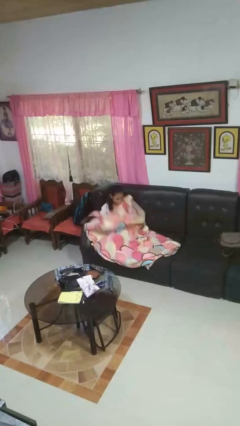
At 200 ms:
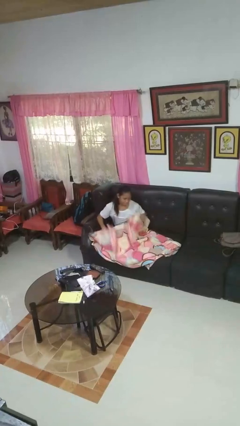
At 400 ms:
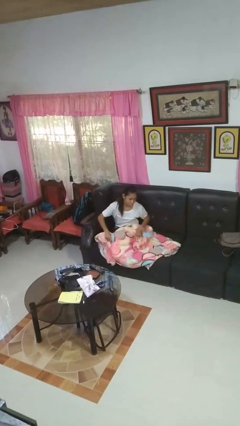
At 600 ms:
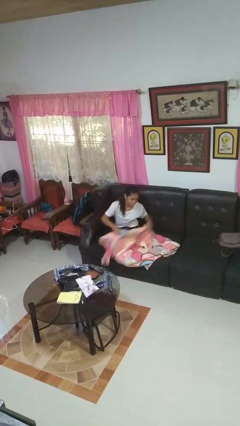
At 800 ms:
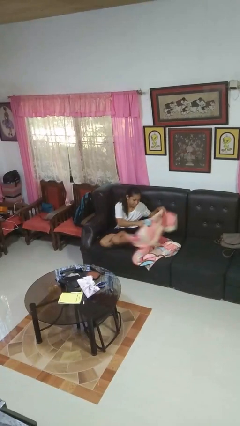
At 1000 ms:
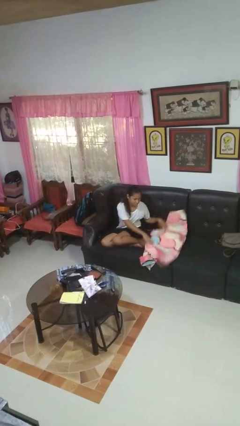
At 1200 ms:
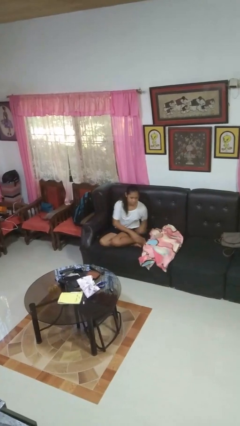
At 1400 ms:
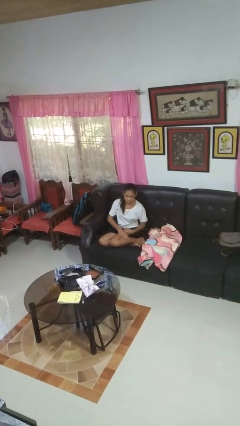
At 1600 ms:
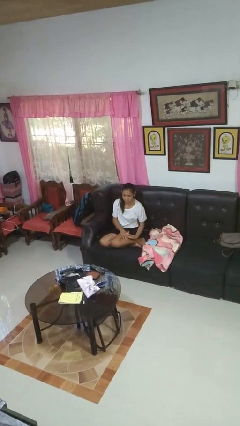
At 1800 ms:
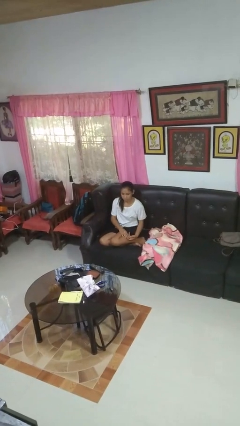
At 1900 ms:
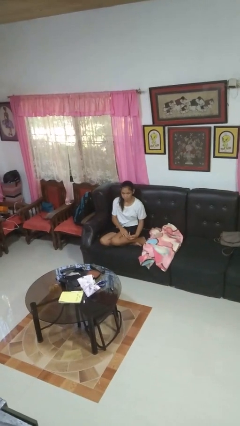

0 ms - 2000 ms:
person uncovers with blanket

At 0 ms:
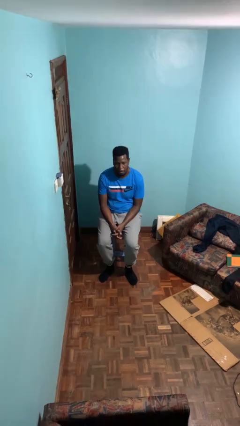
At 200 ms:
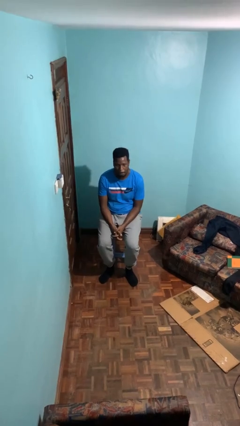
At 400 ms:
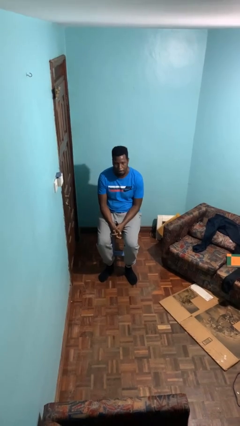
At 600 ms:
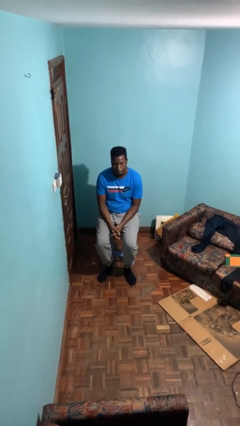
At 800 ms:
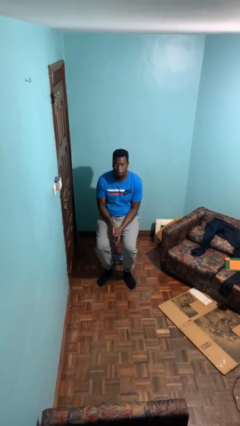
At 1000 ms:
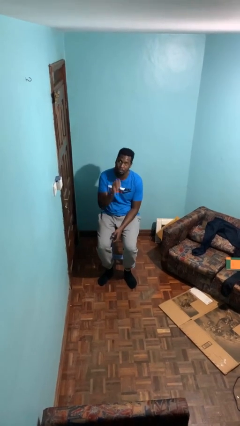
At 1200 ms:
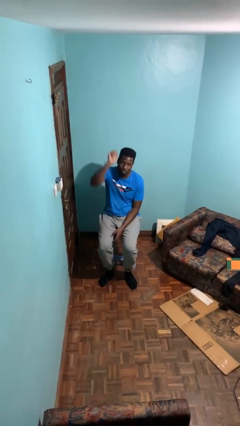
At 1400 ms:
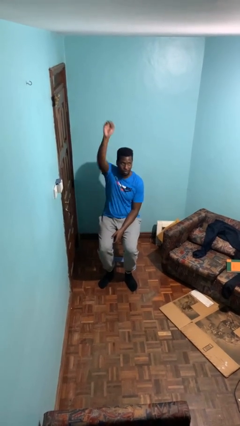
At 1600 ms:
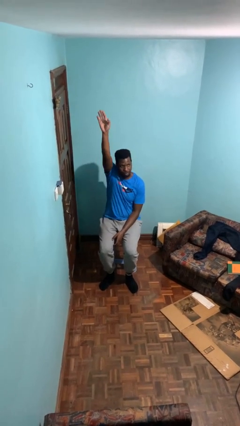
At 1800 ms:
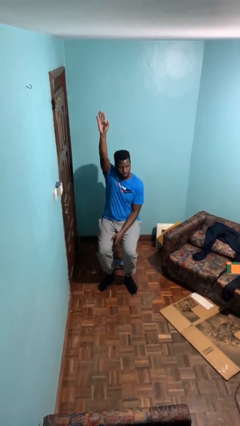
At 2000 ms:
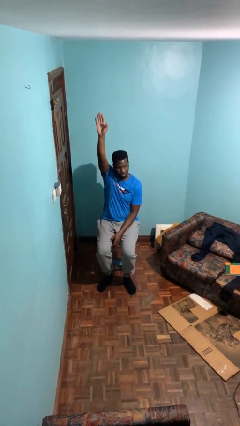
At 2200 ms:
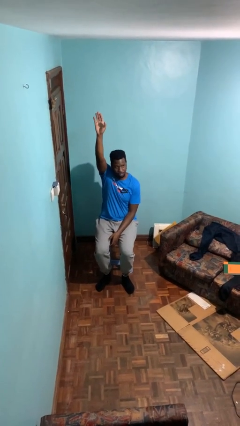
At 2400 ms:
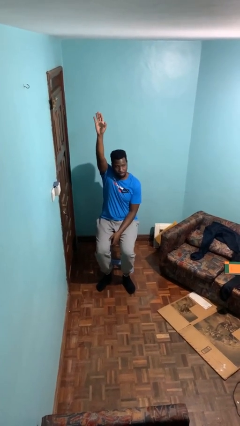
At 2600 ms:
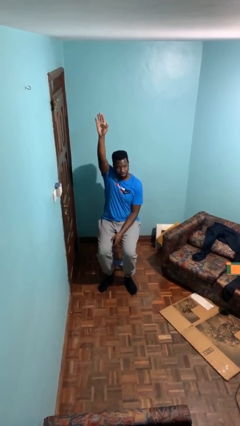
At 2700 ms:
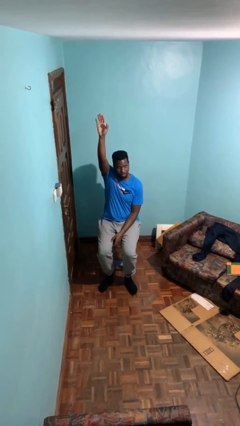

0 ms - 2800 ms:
person gestures raise hand

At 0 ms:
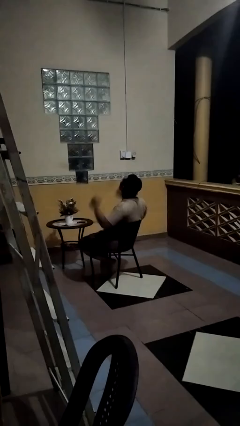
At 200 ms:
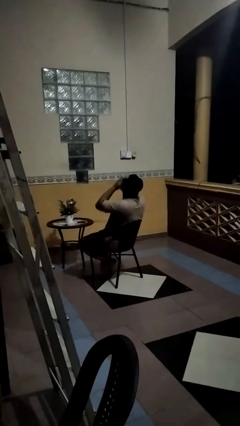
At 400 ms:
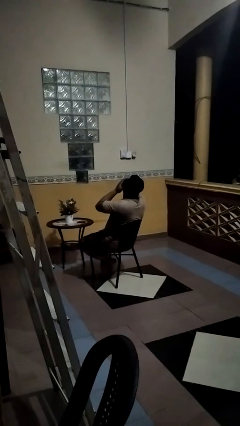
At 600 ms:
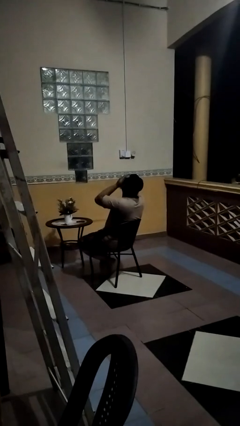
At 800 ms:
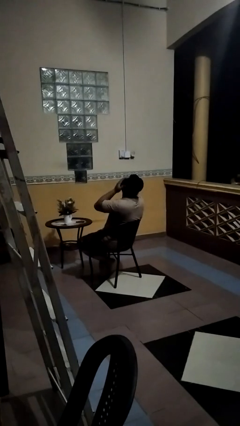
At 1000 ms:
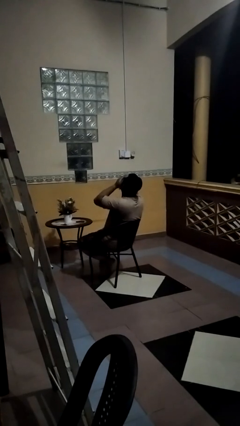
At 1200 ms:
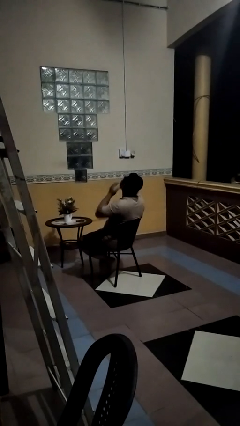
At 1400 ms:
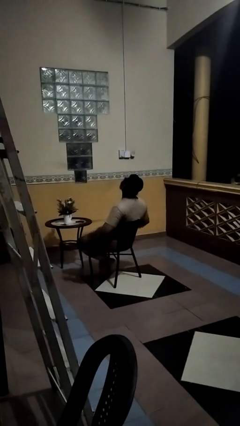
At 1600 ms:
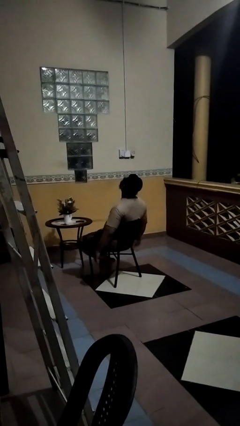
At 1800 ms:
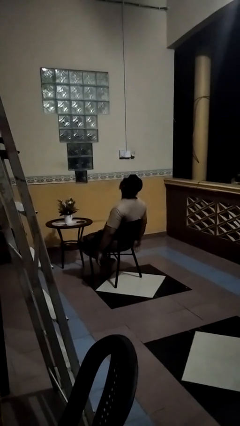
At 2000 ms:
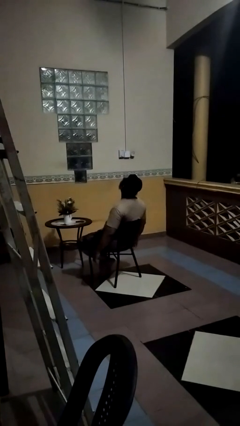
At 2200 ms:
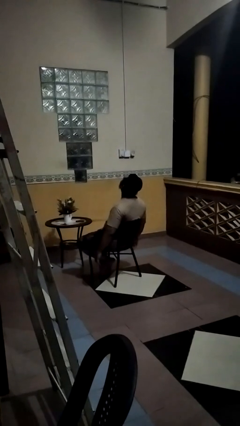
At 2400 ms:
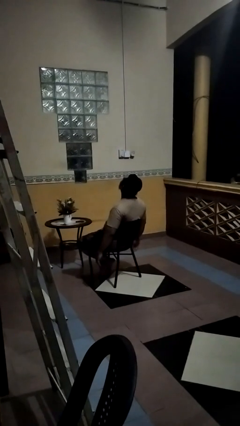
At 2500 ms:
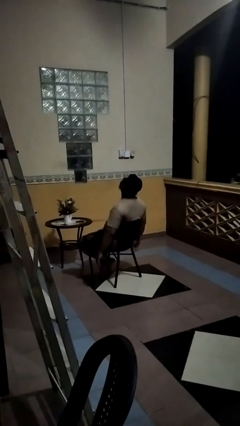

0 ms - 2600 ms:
person covers face with hands

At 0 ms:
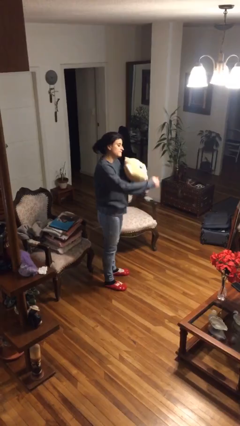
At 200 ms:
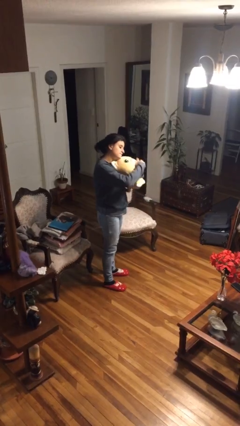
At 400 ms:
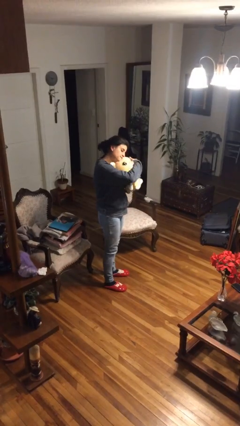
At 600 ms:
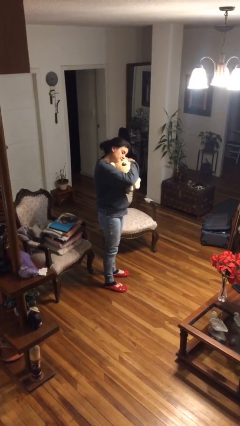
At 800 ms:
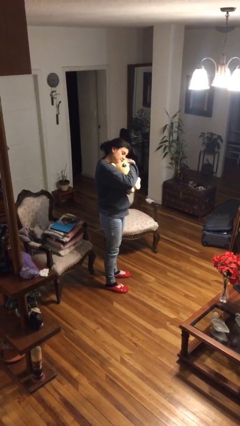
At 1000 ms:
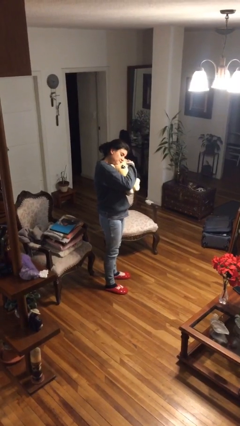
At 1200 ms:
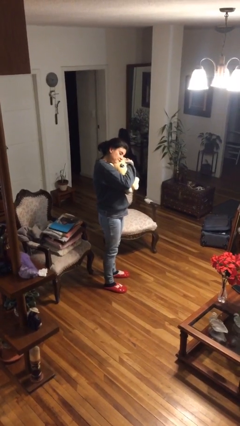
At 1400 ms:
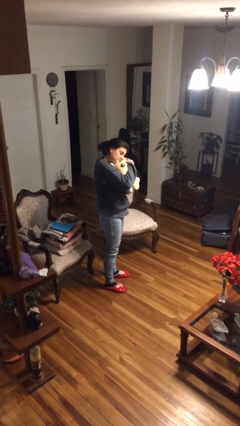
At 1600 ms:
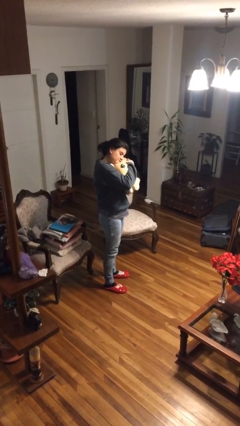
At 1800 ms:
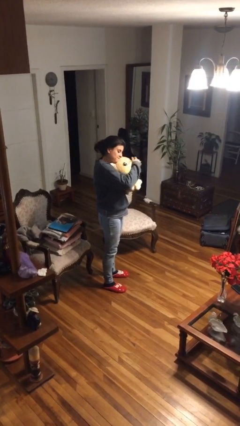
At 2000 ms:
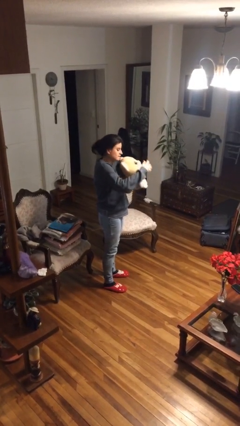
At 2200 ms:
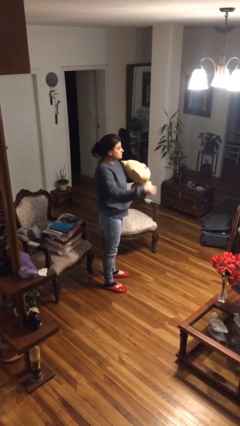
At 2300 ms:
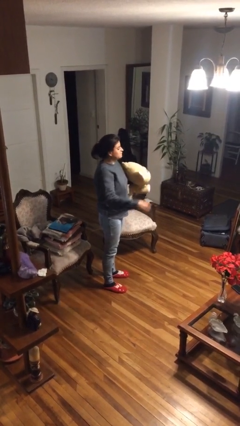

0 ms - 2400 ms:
person hugs stuffed animal

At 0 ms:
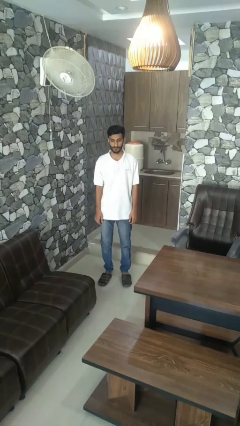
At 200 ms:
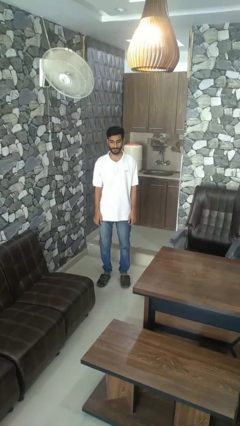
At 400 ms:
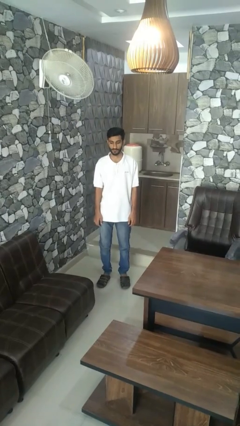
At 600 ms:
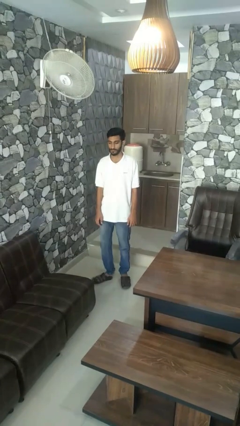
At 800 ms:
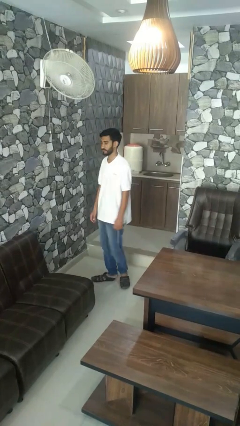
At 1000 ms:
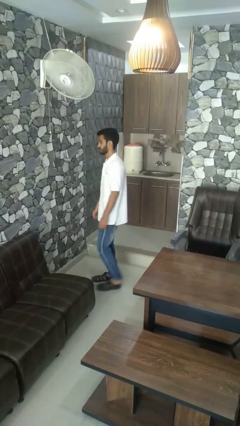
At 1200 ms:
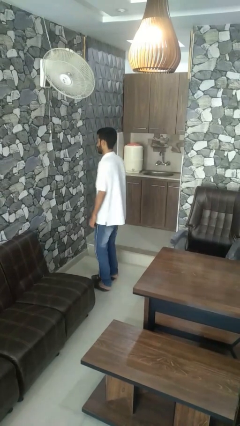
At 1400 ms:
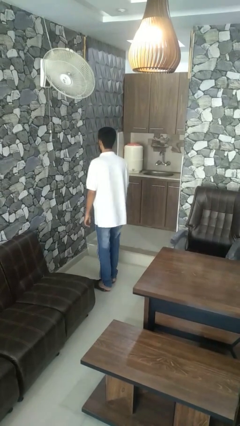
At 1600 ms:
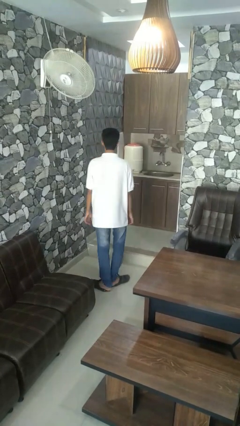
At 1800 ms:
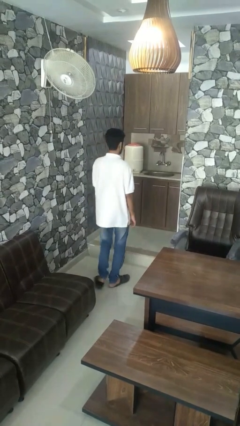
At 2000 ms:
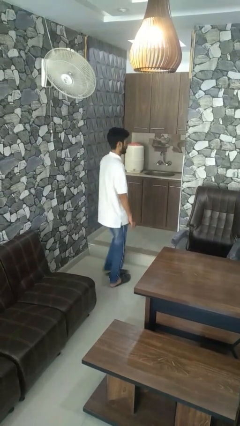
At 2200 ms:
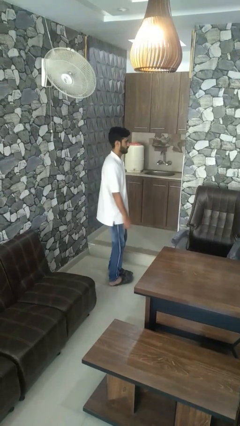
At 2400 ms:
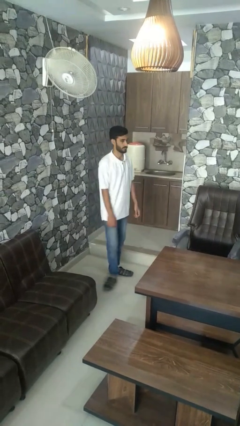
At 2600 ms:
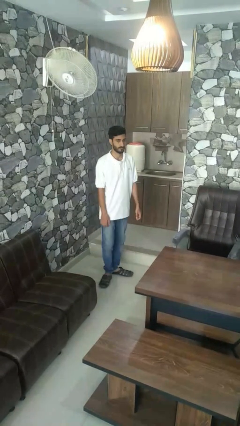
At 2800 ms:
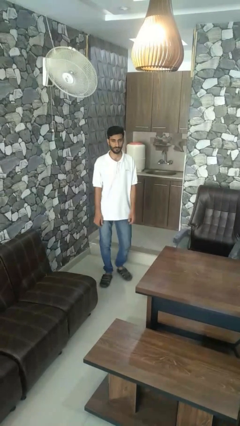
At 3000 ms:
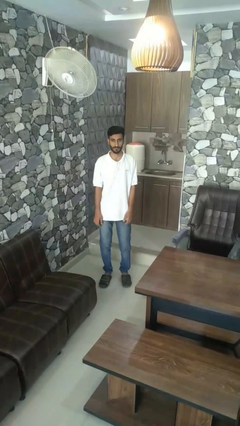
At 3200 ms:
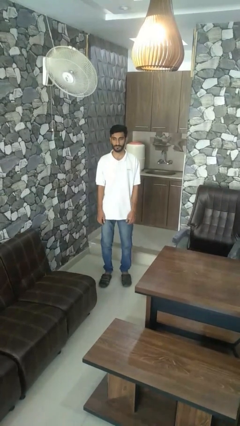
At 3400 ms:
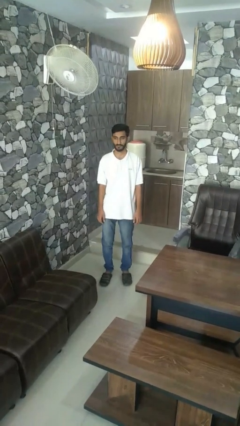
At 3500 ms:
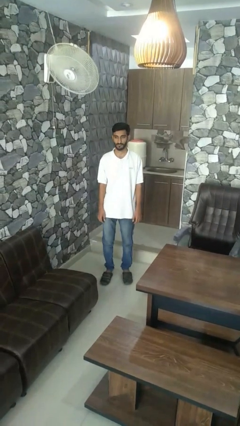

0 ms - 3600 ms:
person twirls

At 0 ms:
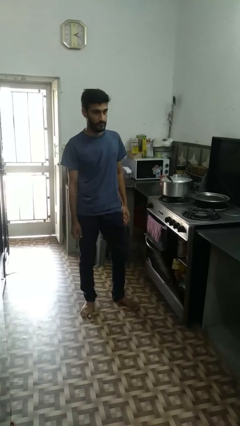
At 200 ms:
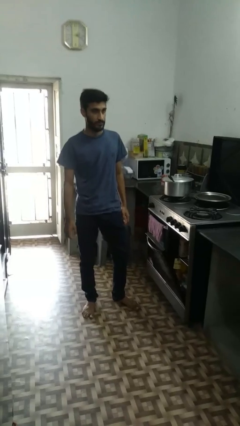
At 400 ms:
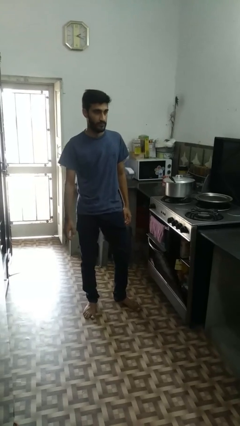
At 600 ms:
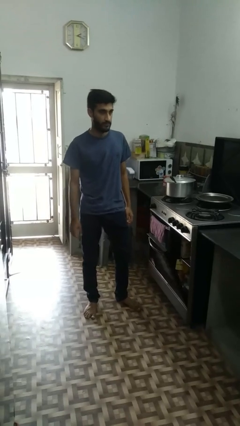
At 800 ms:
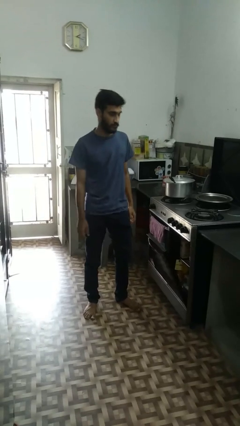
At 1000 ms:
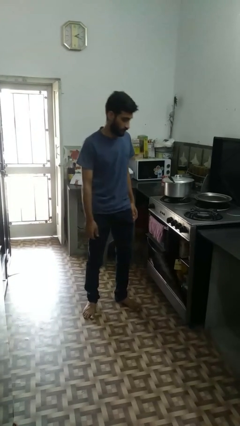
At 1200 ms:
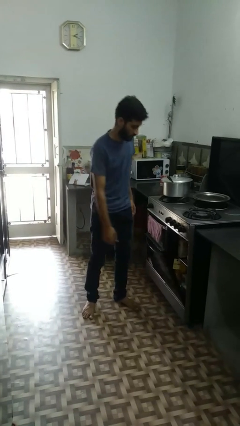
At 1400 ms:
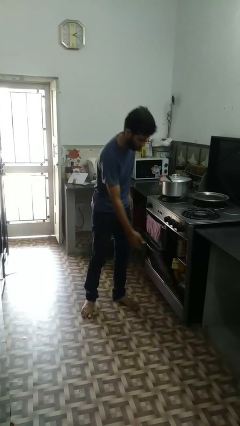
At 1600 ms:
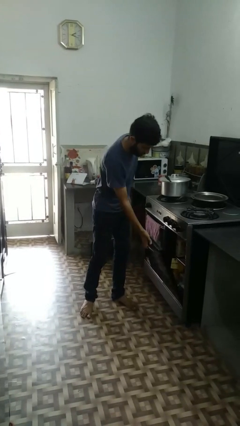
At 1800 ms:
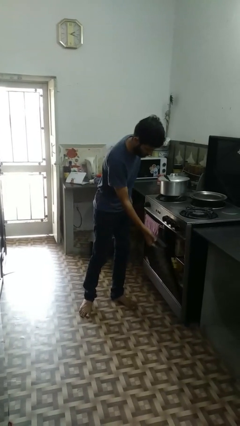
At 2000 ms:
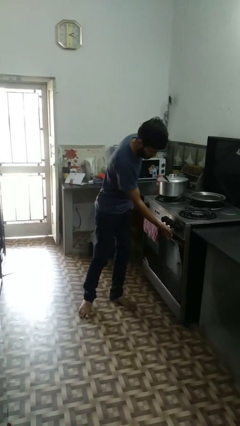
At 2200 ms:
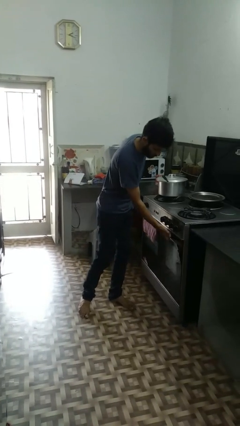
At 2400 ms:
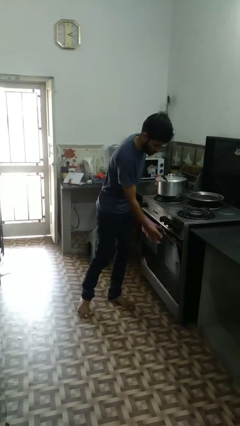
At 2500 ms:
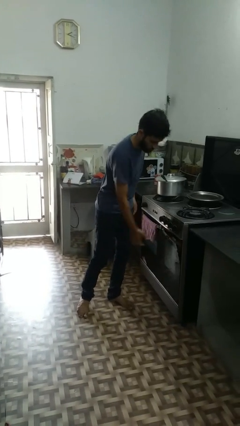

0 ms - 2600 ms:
person closes dishwasher

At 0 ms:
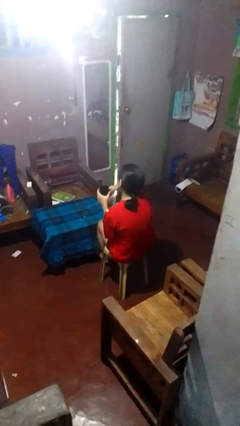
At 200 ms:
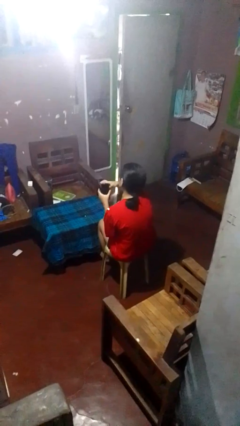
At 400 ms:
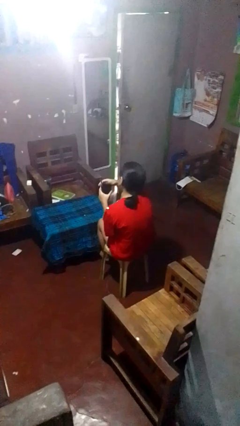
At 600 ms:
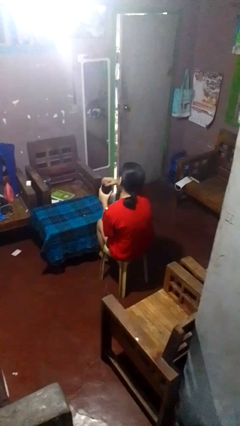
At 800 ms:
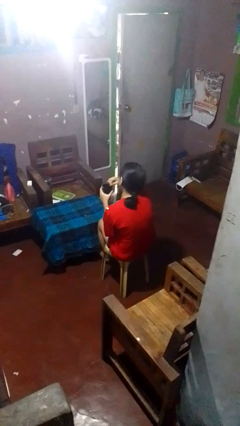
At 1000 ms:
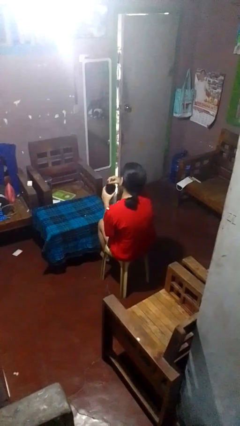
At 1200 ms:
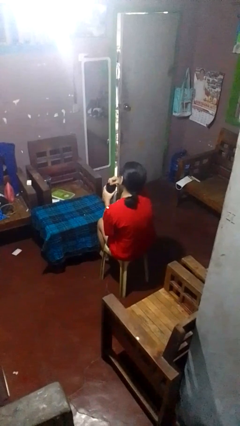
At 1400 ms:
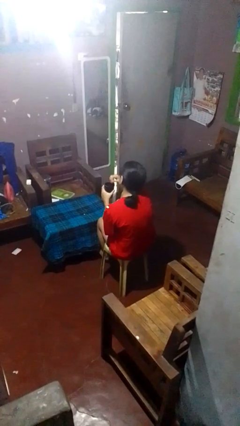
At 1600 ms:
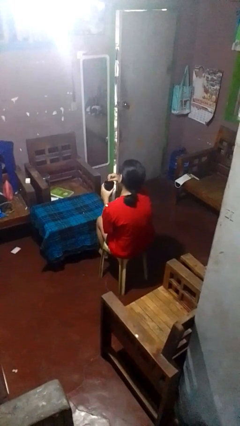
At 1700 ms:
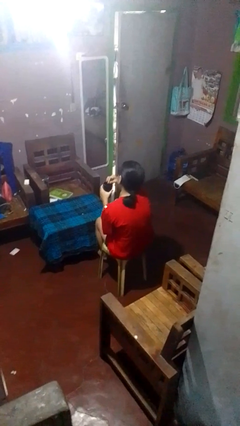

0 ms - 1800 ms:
person stirs mug
